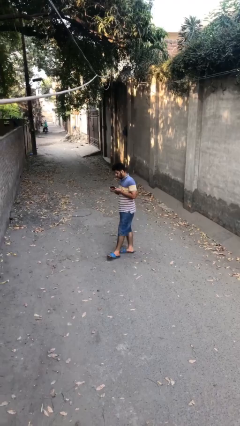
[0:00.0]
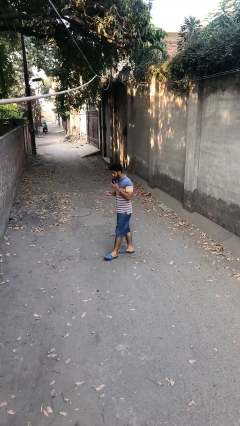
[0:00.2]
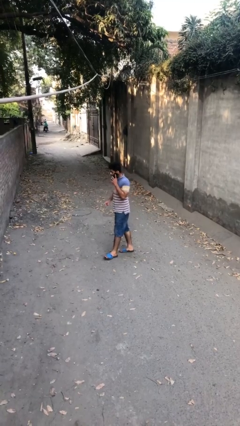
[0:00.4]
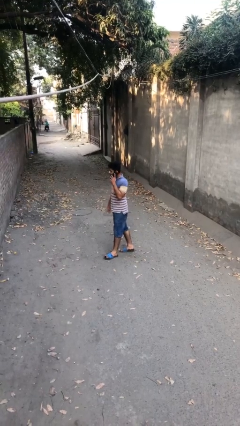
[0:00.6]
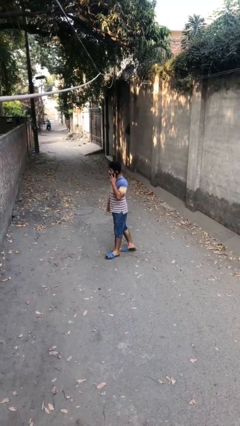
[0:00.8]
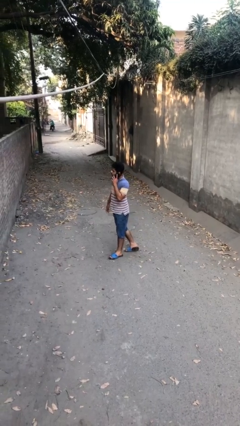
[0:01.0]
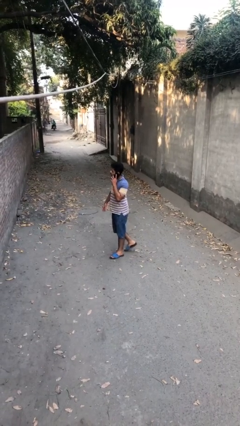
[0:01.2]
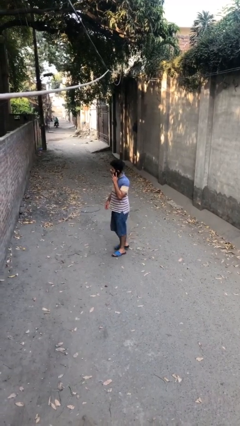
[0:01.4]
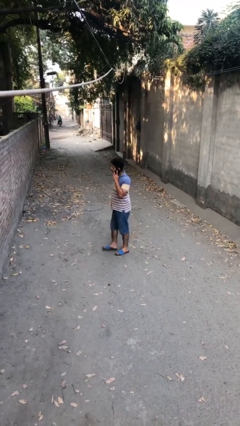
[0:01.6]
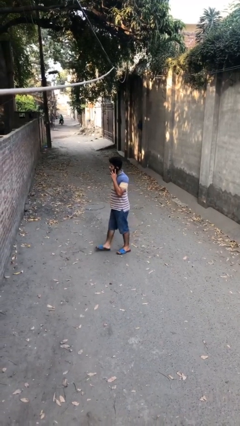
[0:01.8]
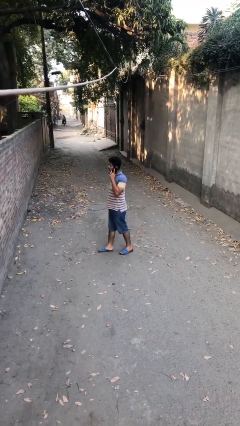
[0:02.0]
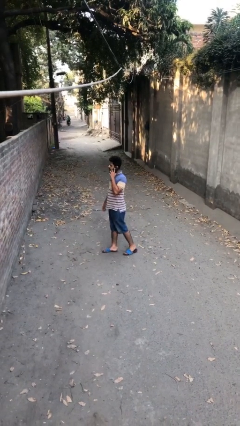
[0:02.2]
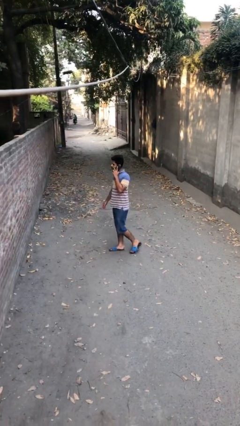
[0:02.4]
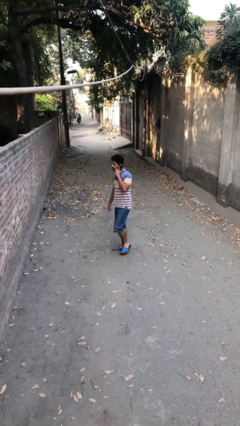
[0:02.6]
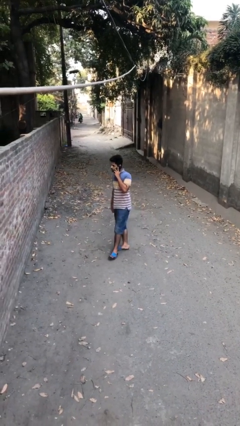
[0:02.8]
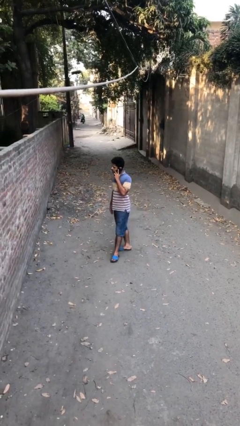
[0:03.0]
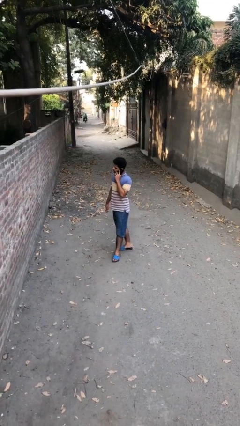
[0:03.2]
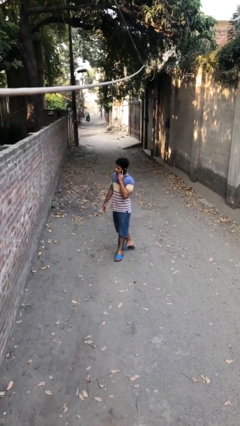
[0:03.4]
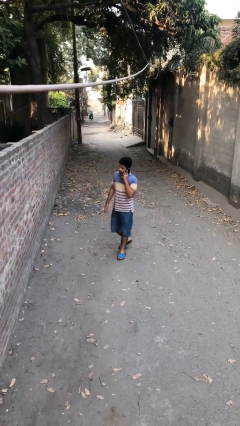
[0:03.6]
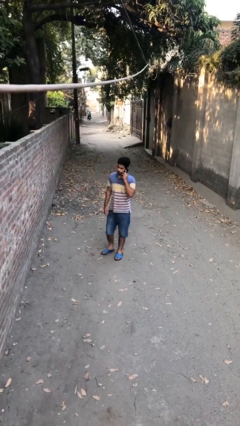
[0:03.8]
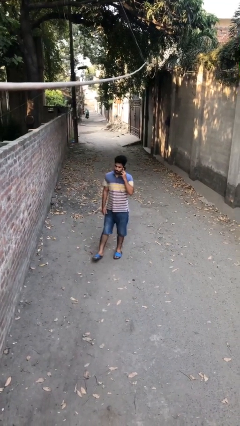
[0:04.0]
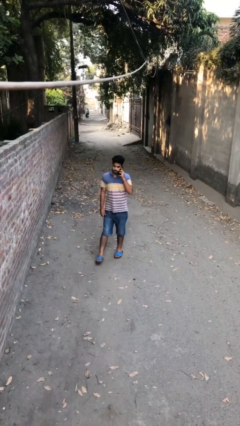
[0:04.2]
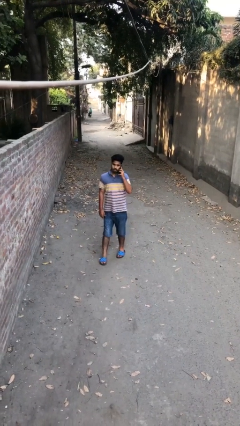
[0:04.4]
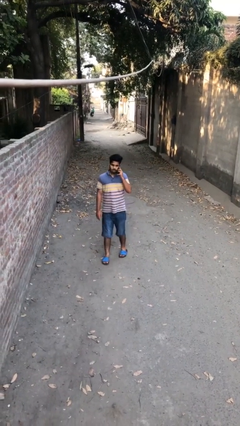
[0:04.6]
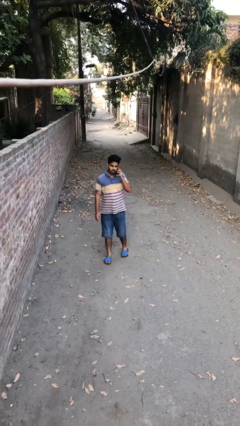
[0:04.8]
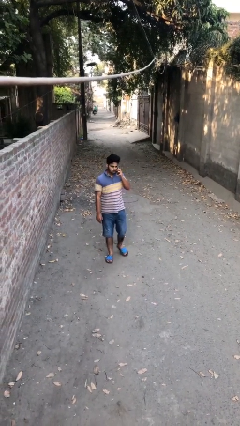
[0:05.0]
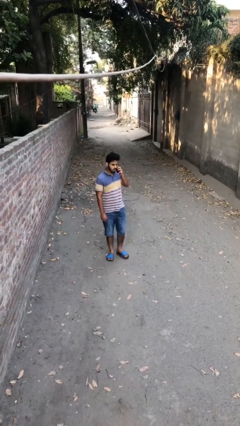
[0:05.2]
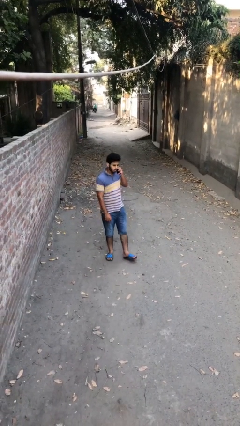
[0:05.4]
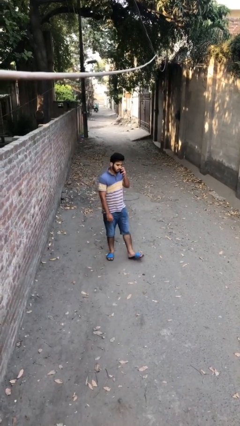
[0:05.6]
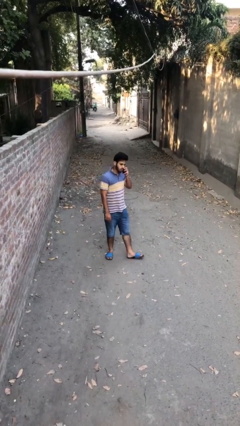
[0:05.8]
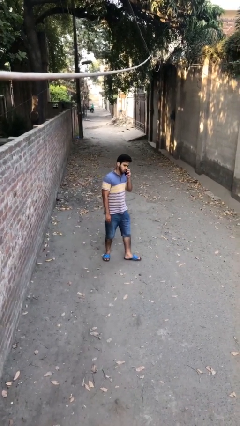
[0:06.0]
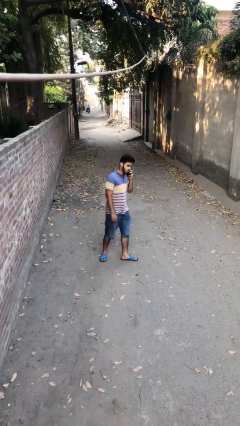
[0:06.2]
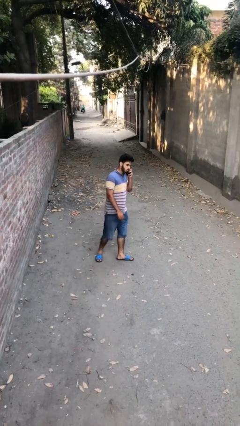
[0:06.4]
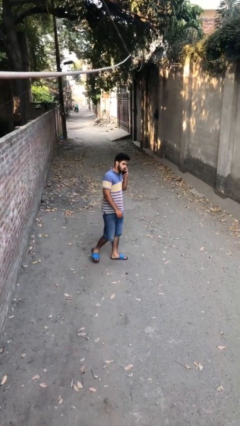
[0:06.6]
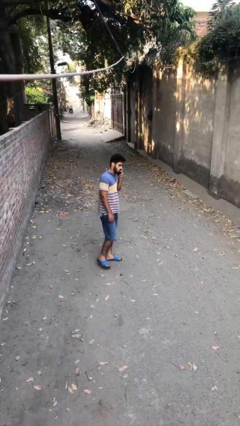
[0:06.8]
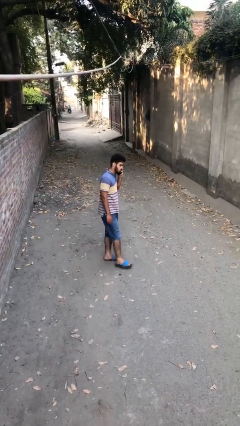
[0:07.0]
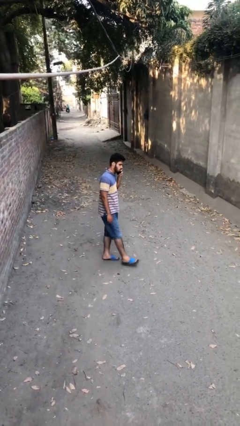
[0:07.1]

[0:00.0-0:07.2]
person talks on phone

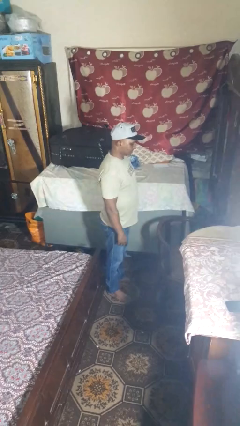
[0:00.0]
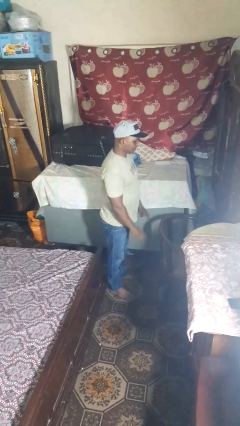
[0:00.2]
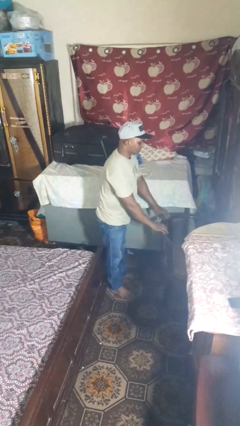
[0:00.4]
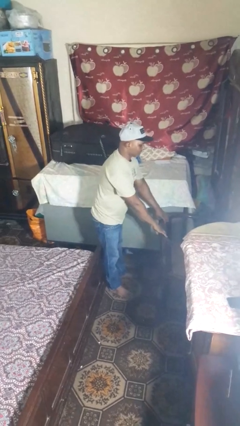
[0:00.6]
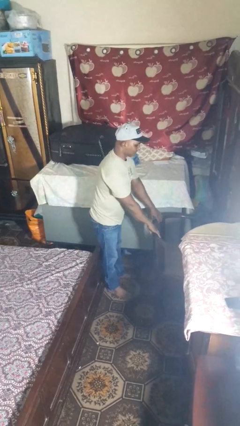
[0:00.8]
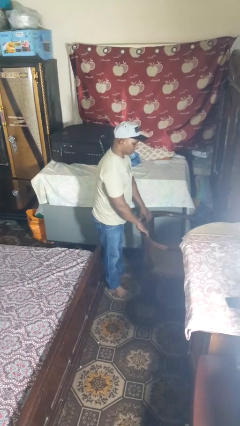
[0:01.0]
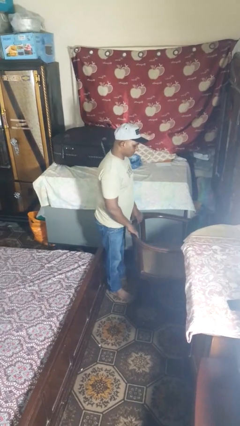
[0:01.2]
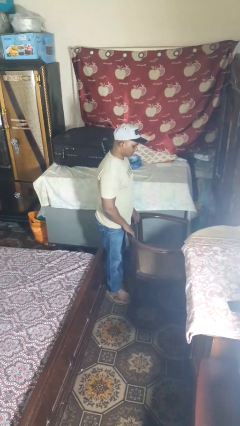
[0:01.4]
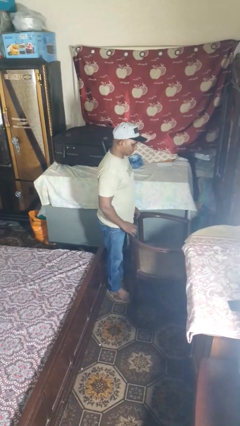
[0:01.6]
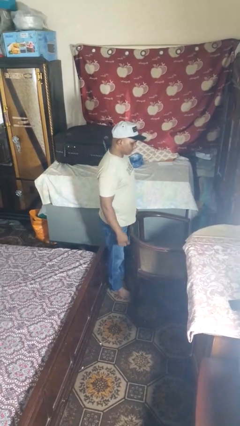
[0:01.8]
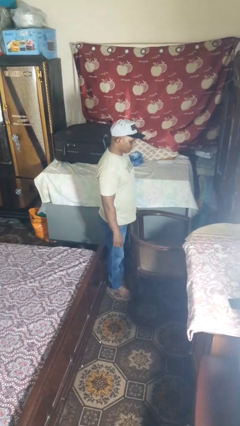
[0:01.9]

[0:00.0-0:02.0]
person pulls out chair

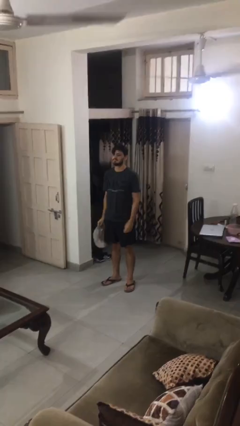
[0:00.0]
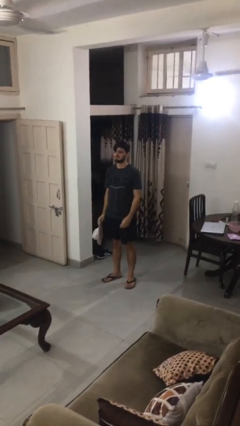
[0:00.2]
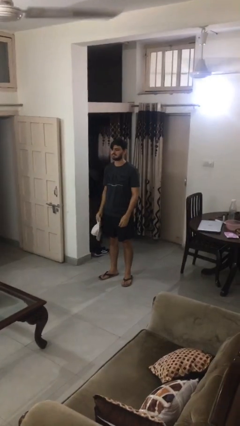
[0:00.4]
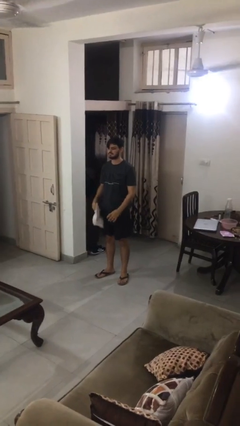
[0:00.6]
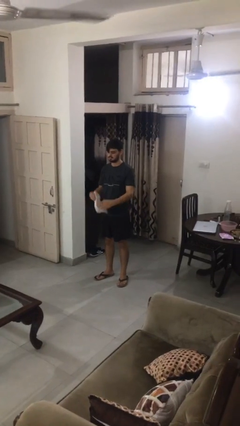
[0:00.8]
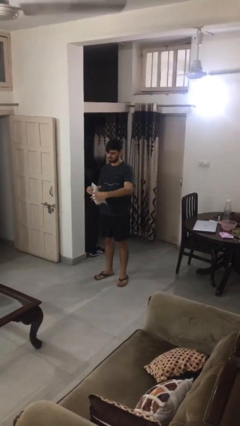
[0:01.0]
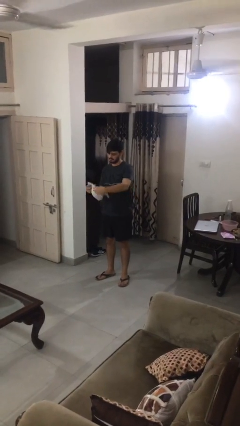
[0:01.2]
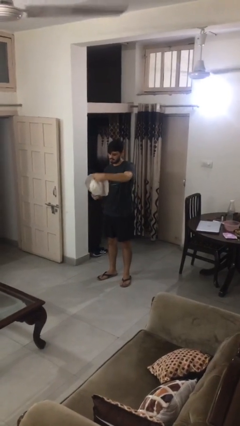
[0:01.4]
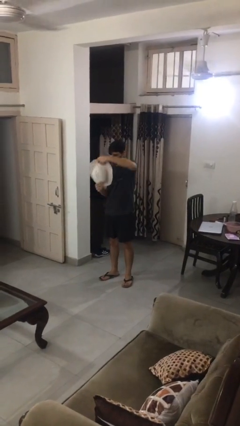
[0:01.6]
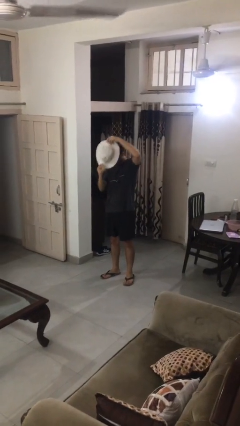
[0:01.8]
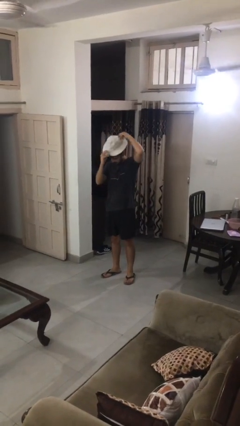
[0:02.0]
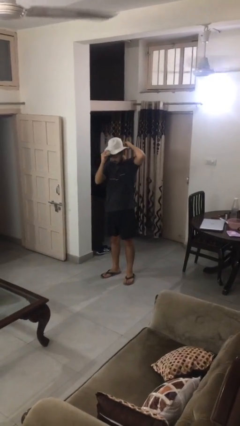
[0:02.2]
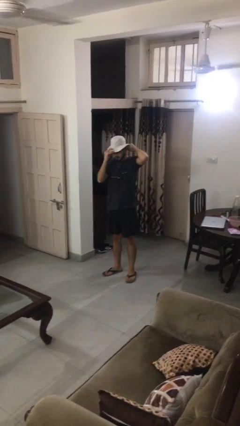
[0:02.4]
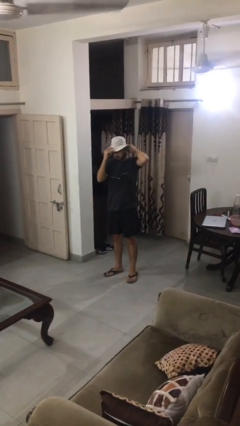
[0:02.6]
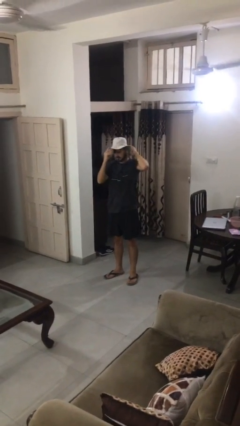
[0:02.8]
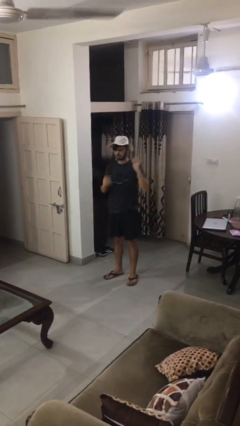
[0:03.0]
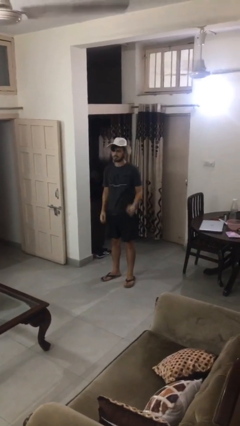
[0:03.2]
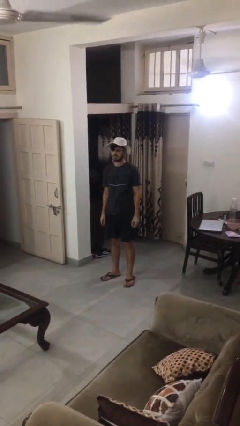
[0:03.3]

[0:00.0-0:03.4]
person puts on hat

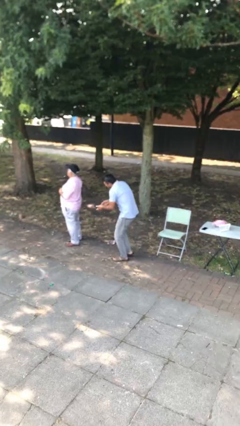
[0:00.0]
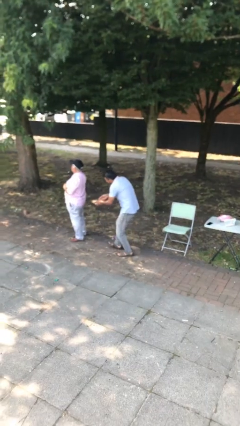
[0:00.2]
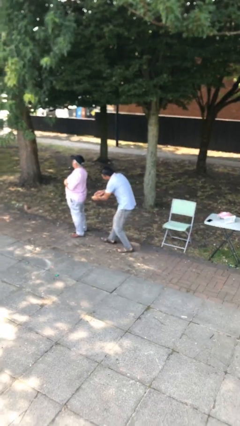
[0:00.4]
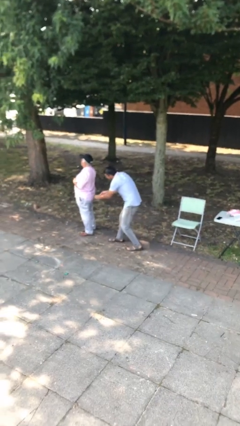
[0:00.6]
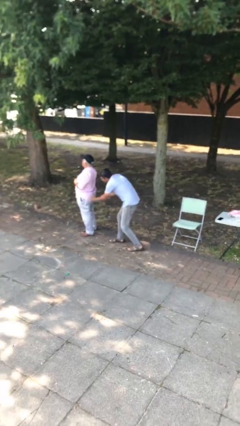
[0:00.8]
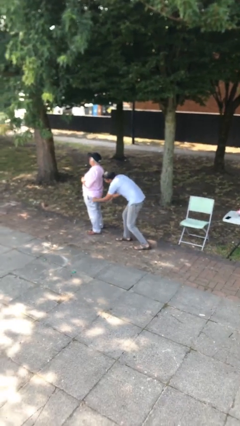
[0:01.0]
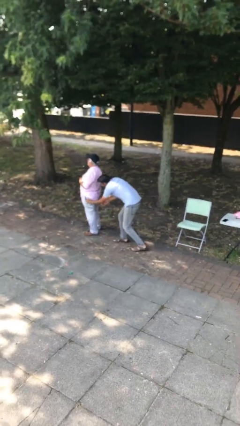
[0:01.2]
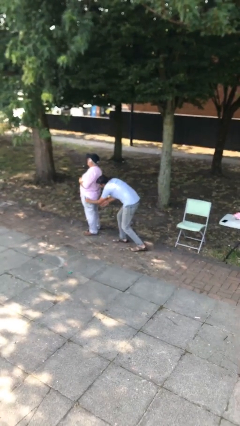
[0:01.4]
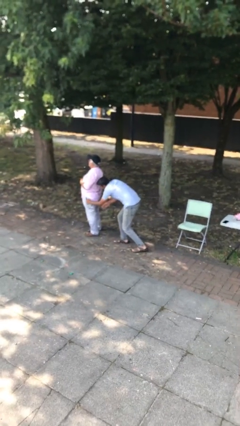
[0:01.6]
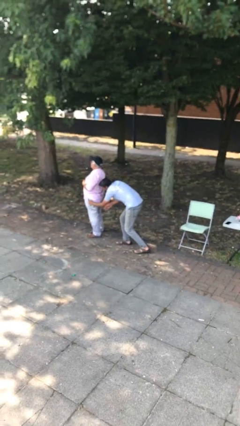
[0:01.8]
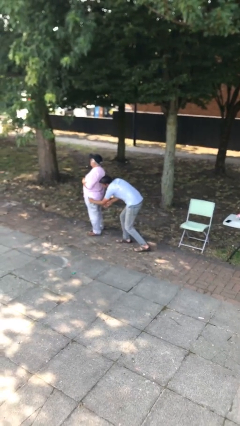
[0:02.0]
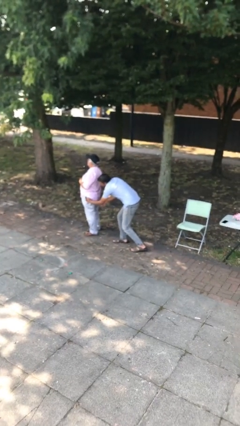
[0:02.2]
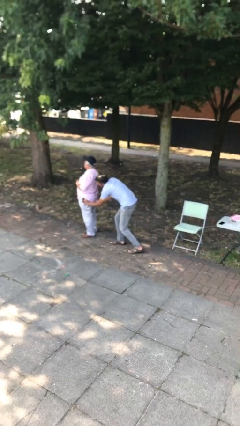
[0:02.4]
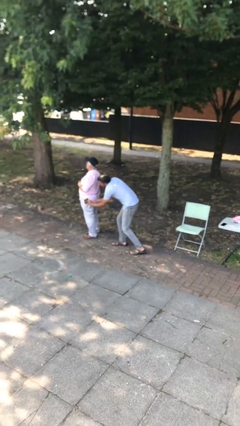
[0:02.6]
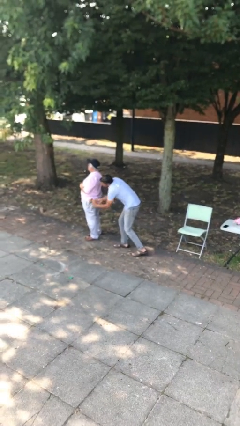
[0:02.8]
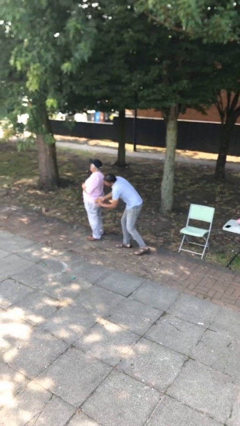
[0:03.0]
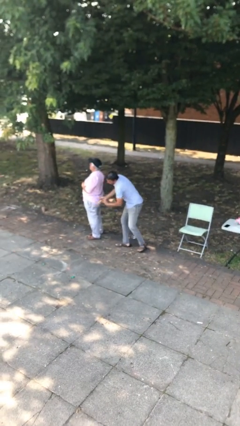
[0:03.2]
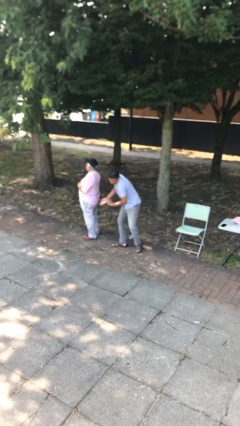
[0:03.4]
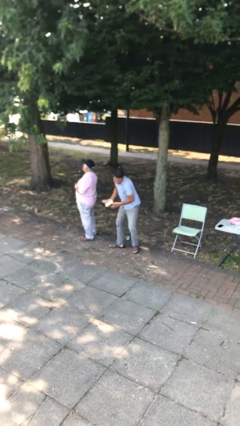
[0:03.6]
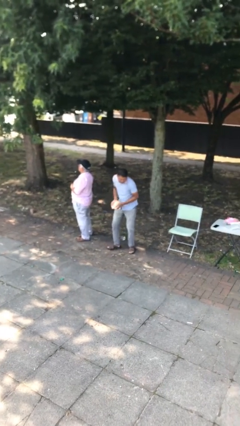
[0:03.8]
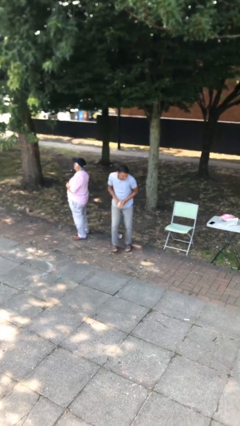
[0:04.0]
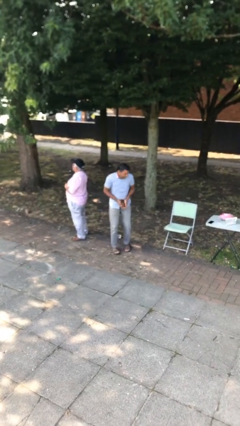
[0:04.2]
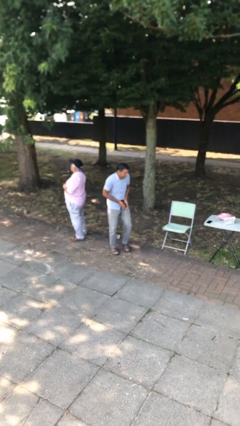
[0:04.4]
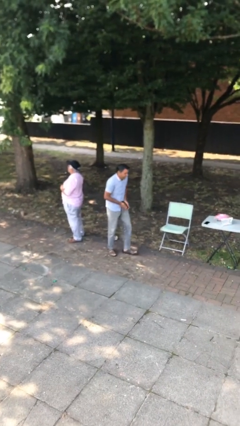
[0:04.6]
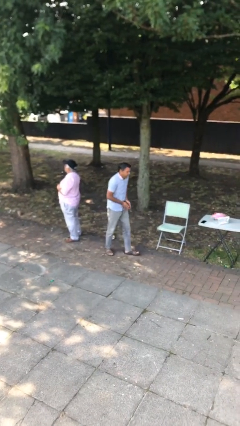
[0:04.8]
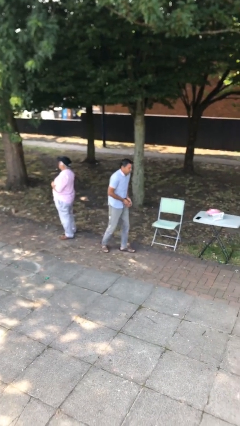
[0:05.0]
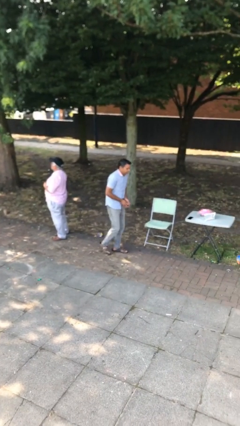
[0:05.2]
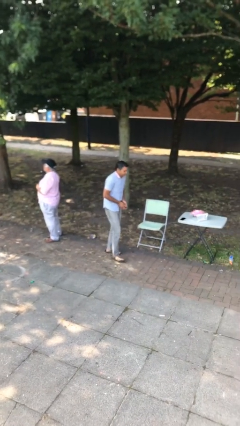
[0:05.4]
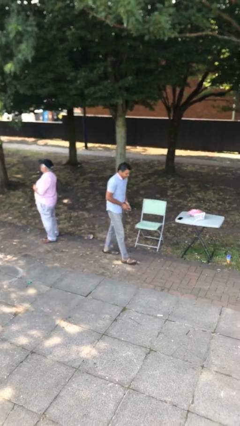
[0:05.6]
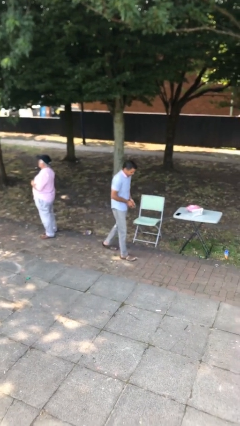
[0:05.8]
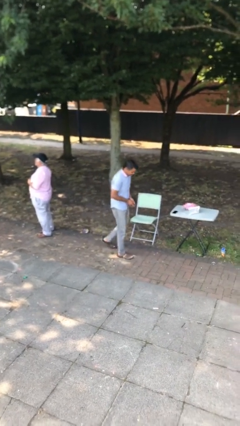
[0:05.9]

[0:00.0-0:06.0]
person steals object from person
